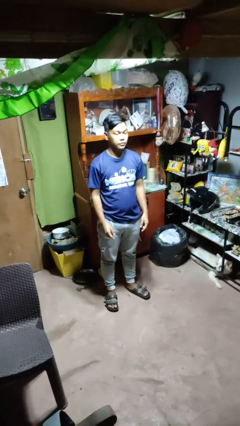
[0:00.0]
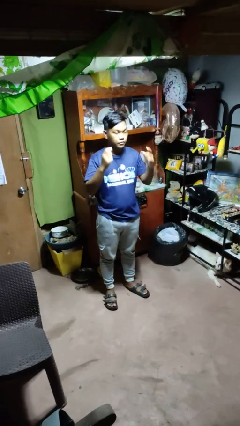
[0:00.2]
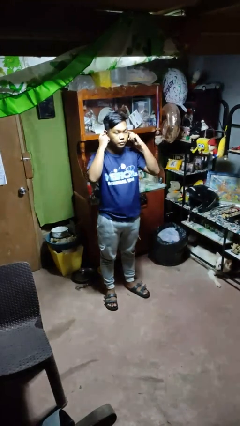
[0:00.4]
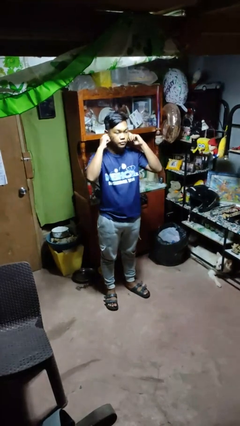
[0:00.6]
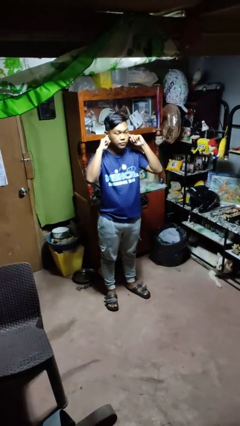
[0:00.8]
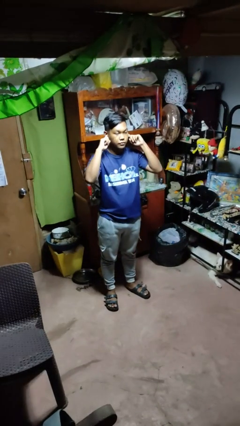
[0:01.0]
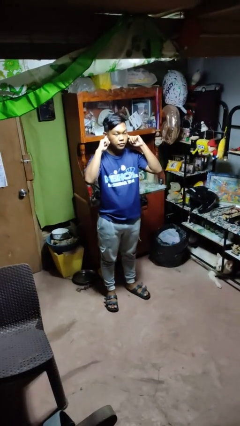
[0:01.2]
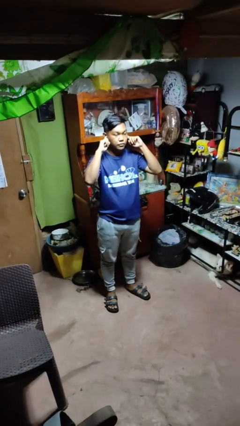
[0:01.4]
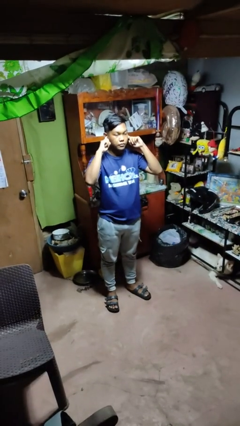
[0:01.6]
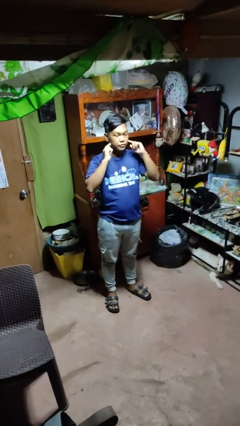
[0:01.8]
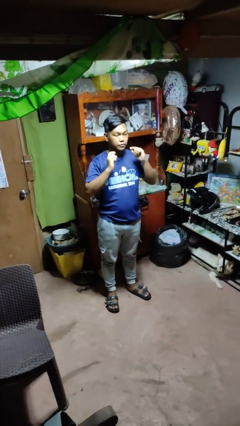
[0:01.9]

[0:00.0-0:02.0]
person puts fingers in ear

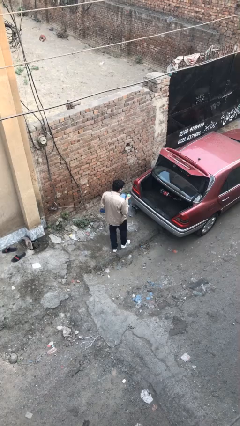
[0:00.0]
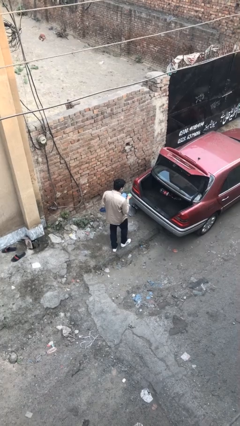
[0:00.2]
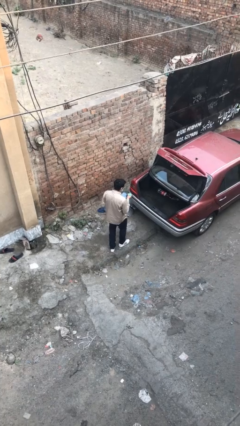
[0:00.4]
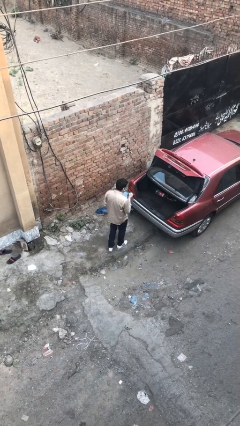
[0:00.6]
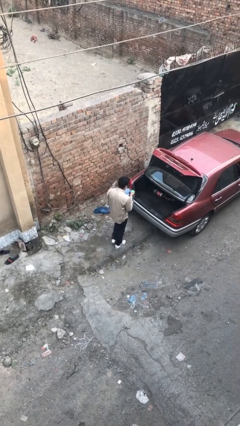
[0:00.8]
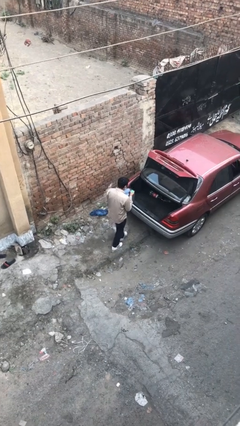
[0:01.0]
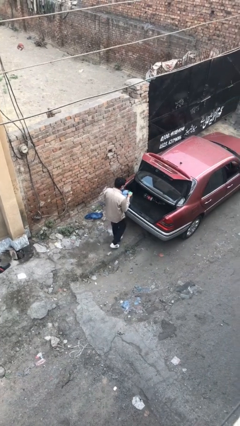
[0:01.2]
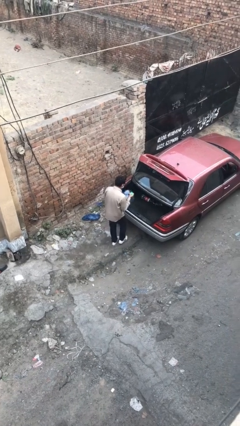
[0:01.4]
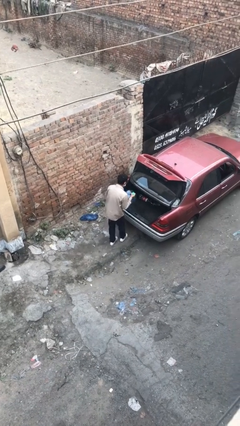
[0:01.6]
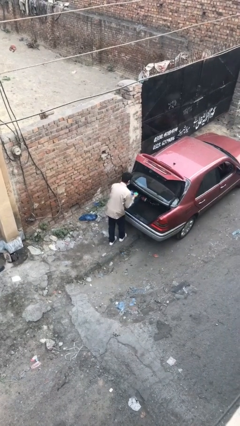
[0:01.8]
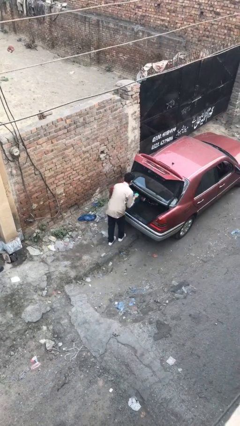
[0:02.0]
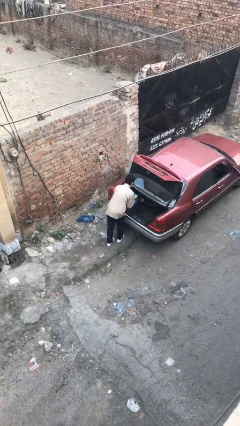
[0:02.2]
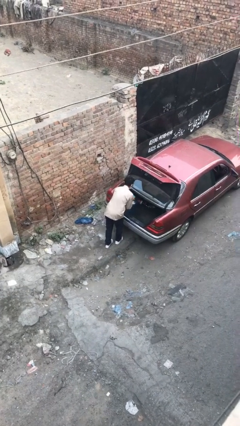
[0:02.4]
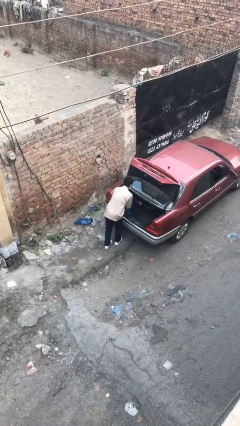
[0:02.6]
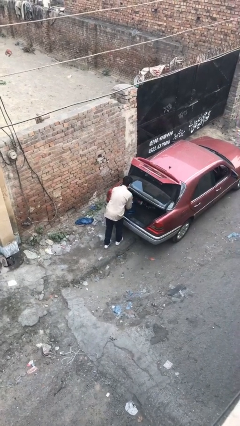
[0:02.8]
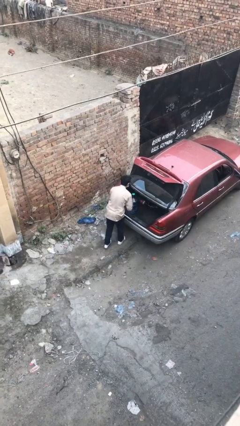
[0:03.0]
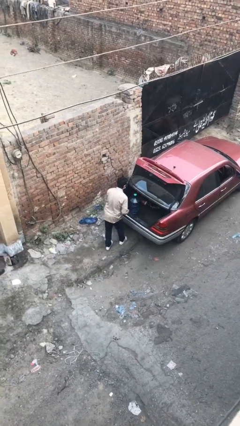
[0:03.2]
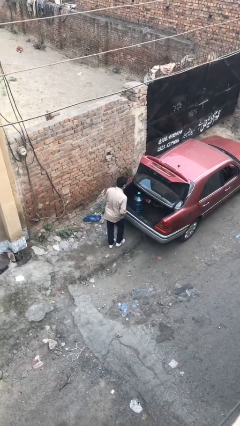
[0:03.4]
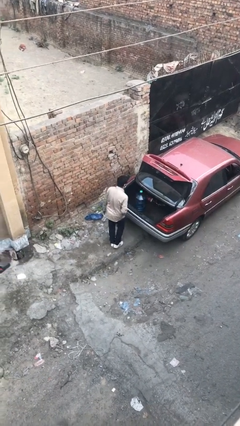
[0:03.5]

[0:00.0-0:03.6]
person loads car

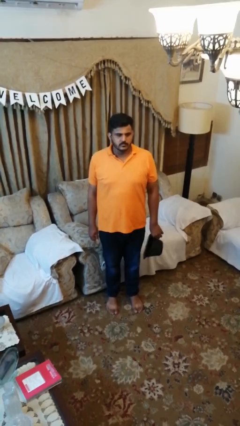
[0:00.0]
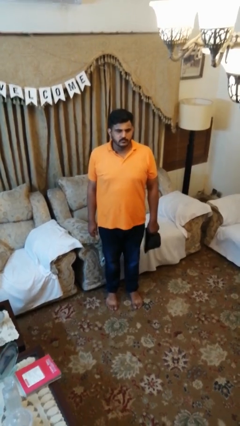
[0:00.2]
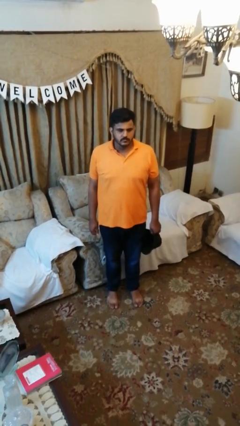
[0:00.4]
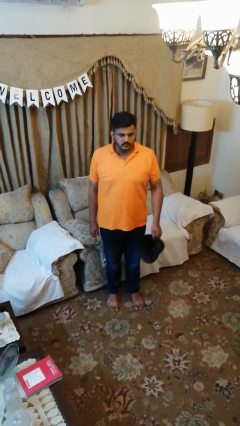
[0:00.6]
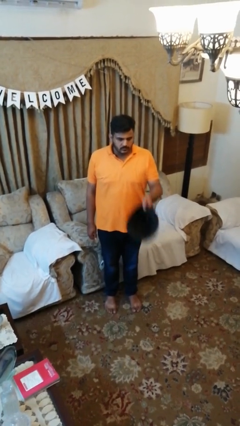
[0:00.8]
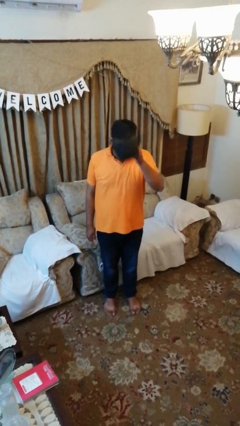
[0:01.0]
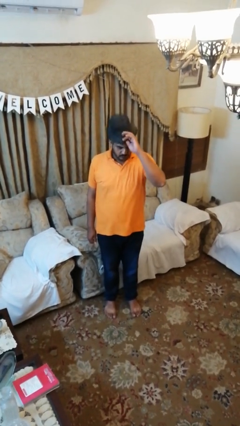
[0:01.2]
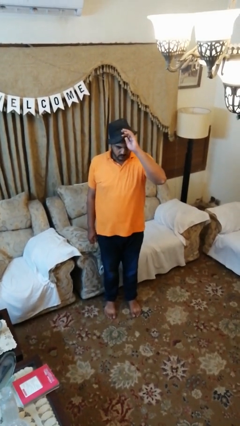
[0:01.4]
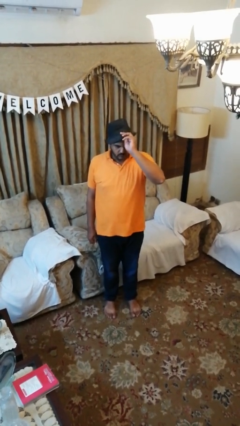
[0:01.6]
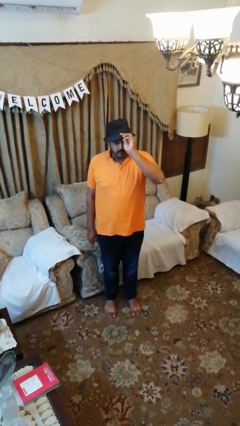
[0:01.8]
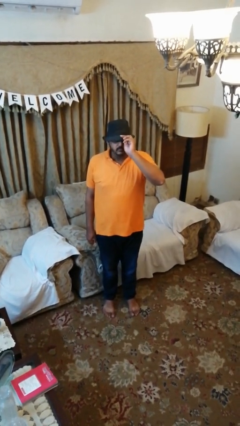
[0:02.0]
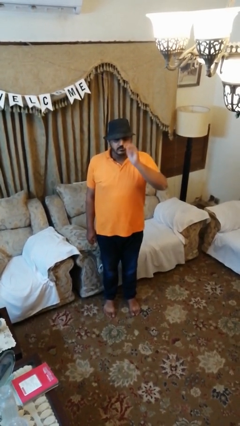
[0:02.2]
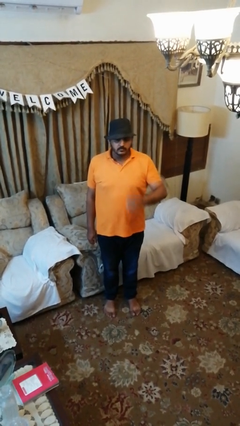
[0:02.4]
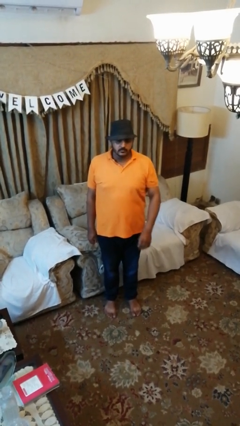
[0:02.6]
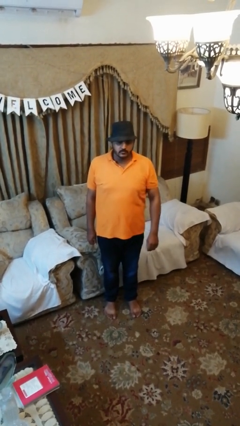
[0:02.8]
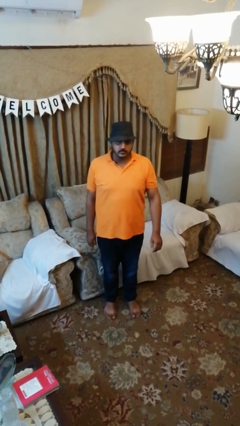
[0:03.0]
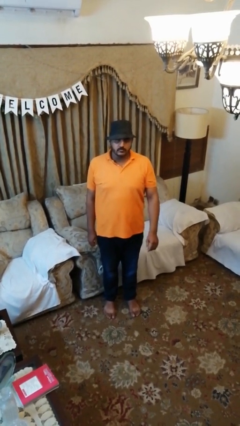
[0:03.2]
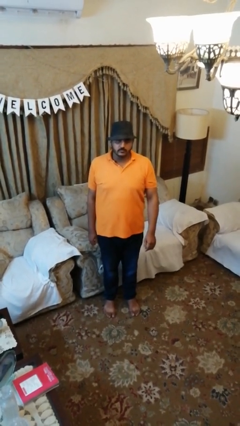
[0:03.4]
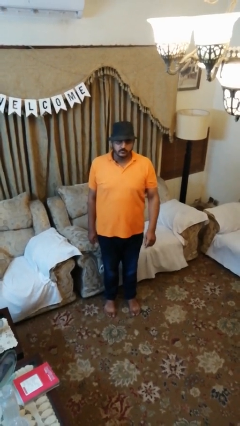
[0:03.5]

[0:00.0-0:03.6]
person puts on hat

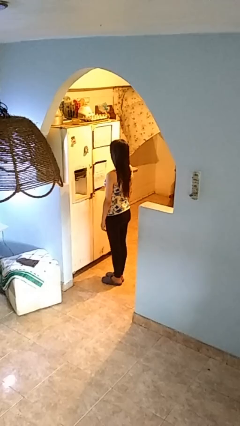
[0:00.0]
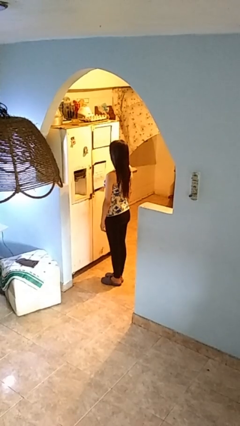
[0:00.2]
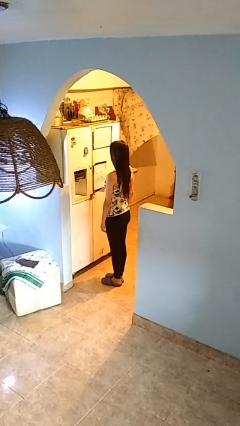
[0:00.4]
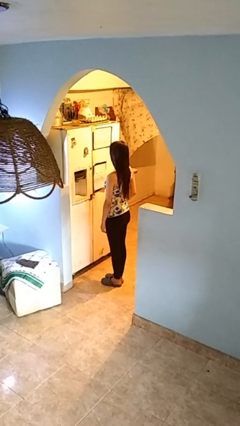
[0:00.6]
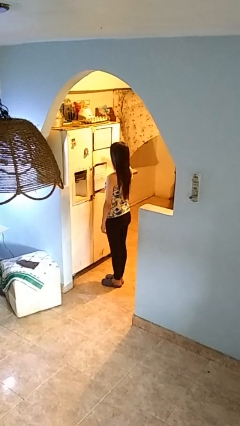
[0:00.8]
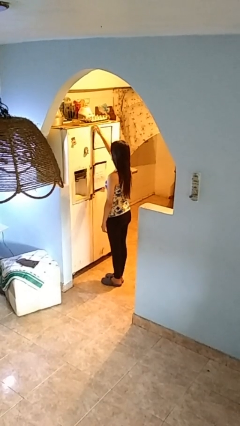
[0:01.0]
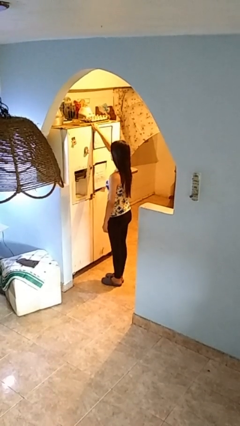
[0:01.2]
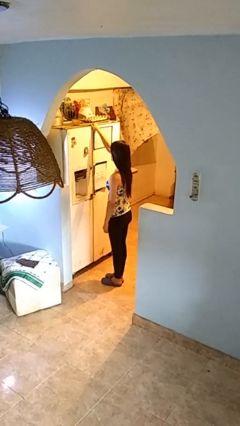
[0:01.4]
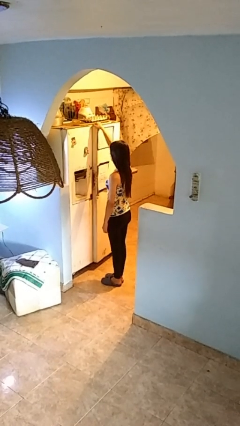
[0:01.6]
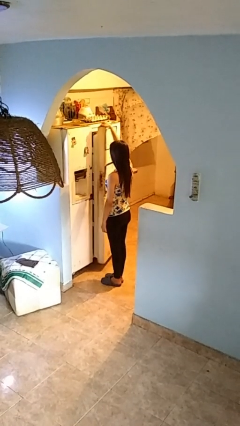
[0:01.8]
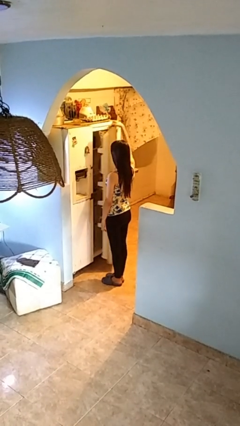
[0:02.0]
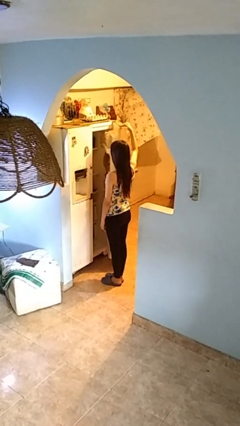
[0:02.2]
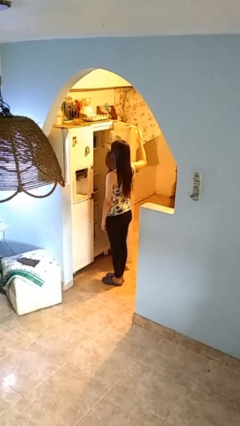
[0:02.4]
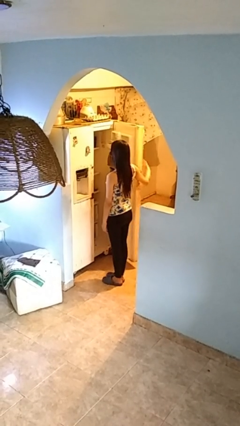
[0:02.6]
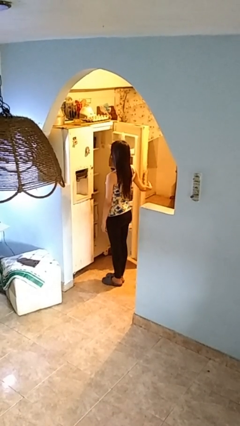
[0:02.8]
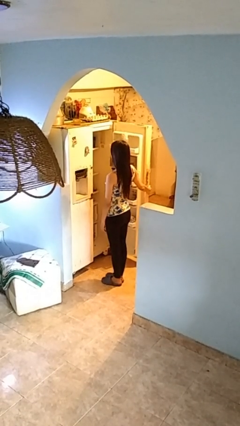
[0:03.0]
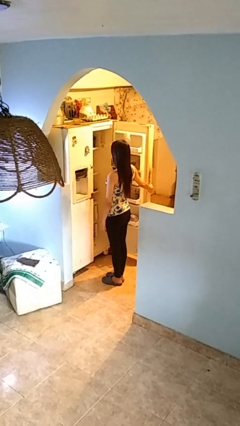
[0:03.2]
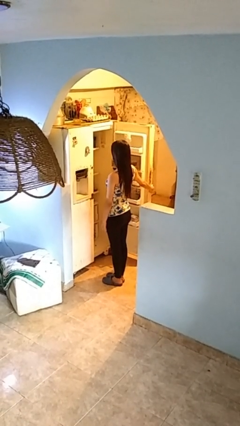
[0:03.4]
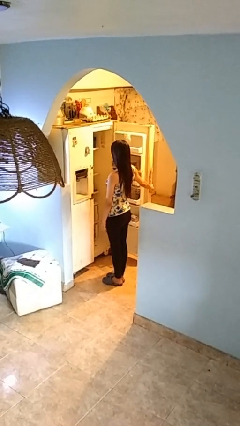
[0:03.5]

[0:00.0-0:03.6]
person opens refrigerator

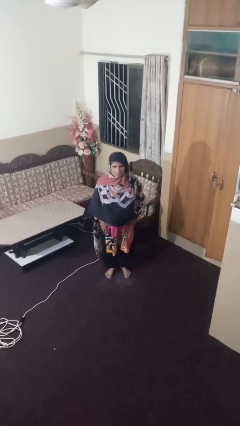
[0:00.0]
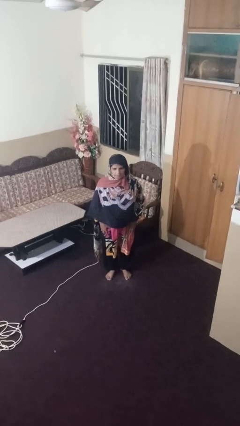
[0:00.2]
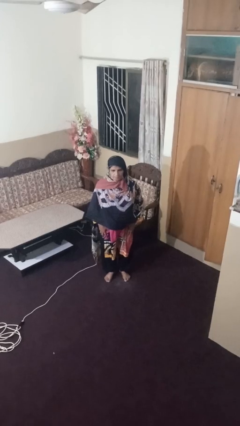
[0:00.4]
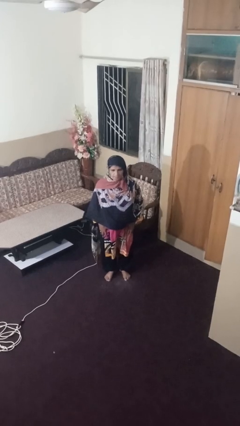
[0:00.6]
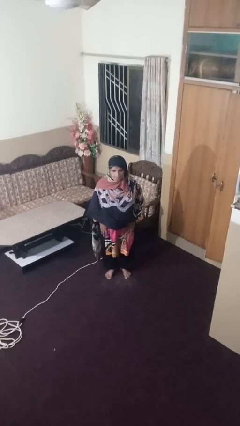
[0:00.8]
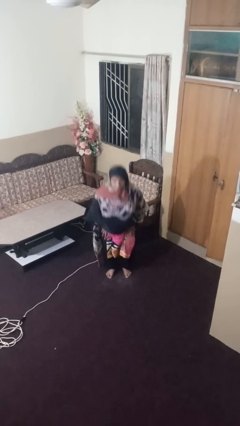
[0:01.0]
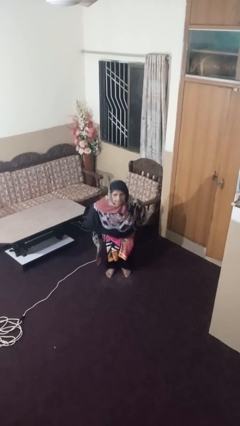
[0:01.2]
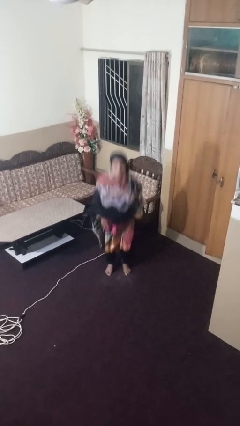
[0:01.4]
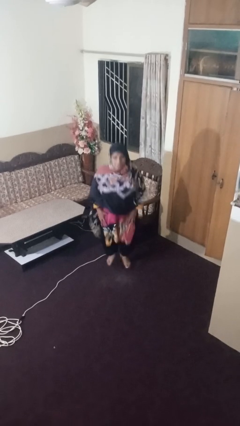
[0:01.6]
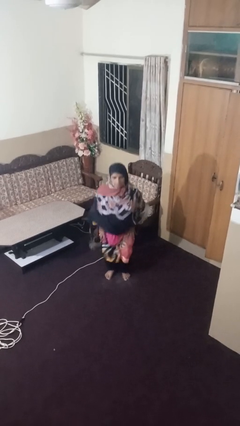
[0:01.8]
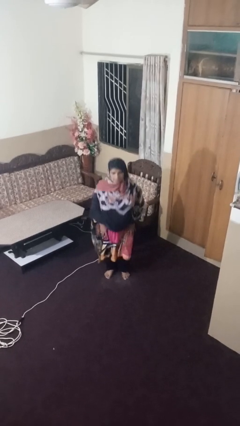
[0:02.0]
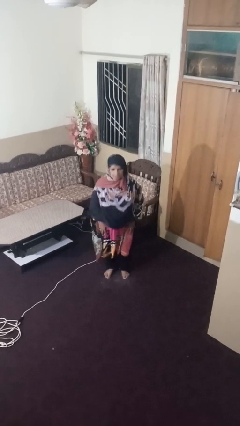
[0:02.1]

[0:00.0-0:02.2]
person jumps

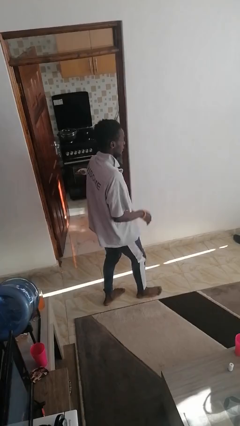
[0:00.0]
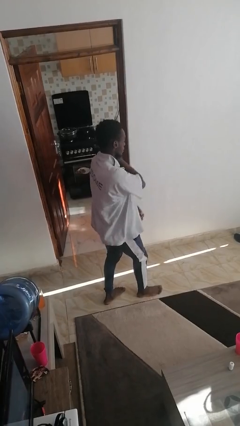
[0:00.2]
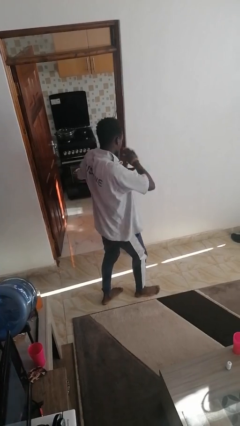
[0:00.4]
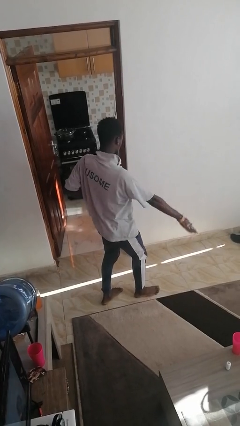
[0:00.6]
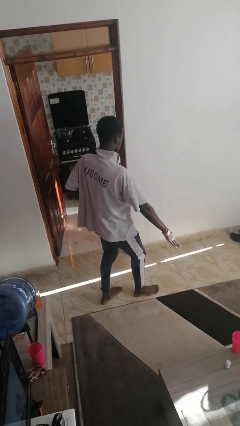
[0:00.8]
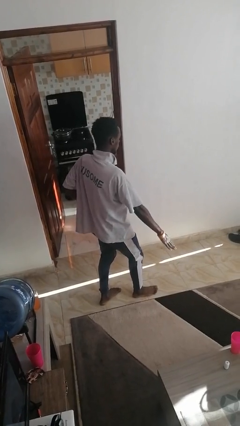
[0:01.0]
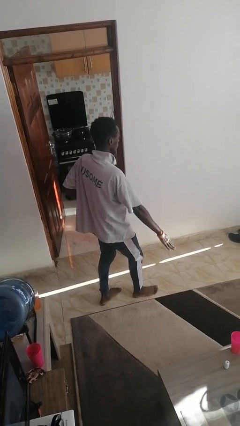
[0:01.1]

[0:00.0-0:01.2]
person karate chop

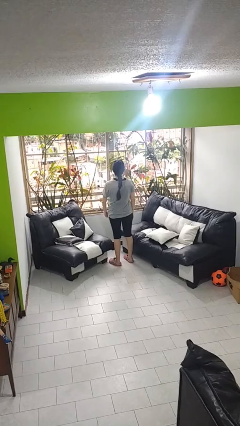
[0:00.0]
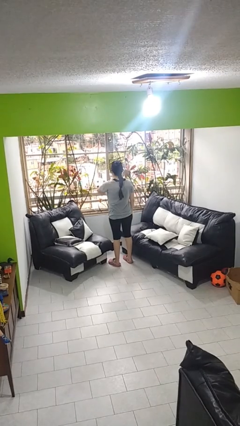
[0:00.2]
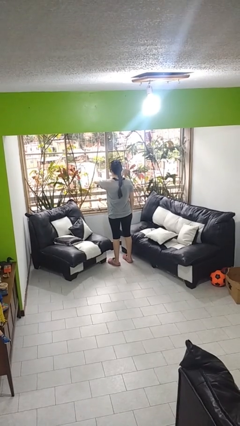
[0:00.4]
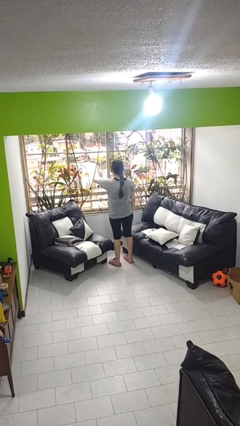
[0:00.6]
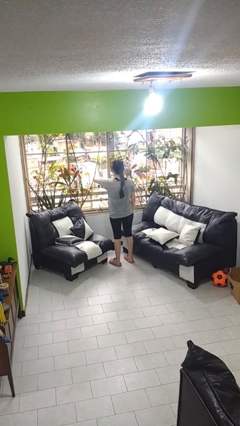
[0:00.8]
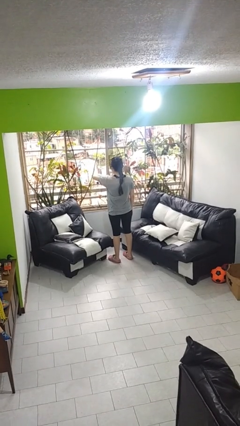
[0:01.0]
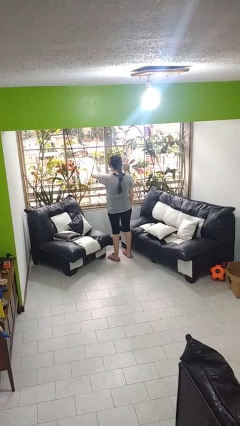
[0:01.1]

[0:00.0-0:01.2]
person looks at wristwatch
